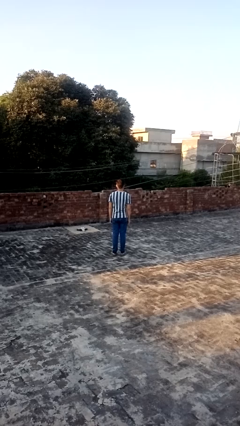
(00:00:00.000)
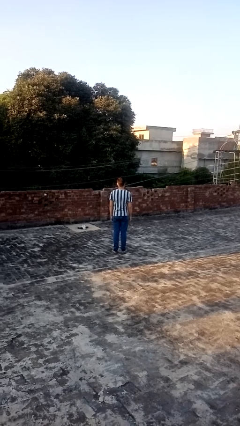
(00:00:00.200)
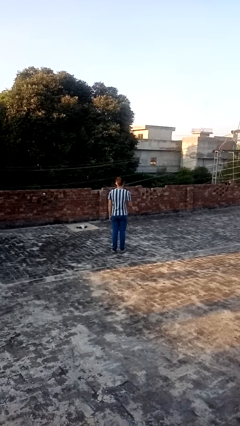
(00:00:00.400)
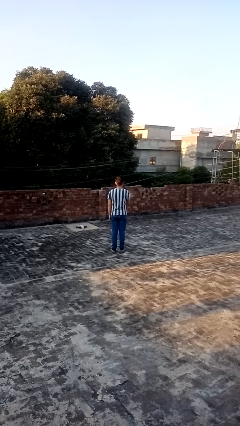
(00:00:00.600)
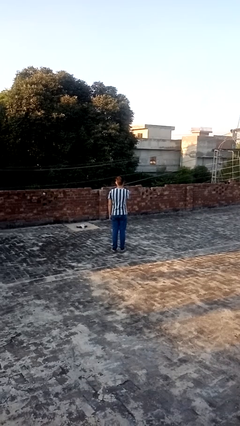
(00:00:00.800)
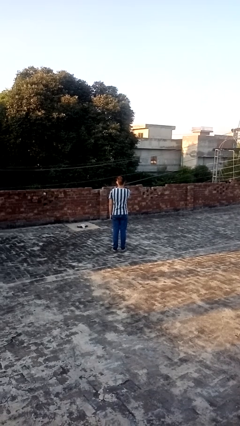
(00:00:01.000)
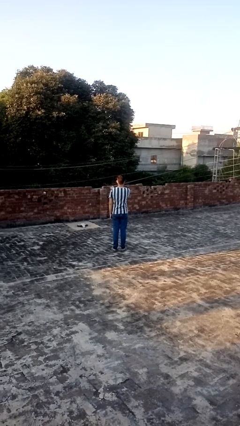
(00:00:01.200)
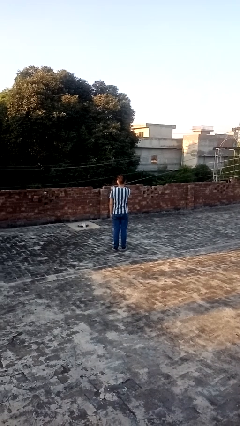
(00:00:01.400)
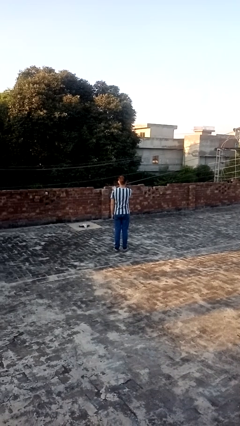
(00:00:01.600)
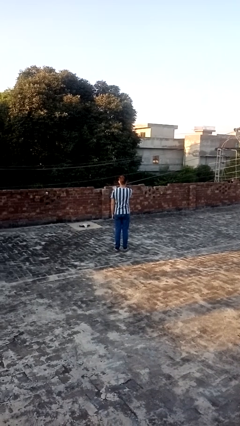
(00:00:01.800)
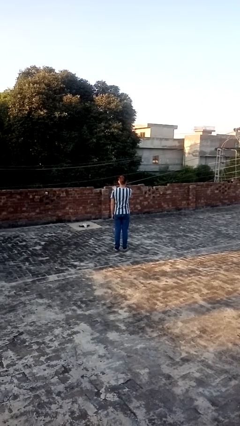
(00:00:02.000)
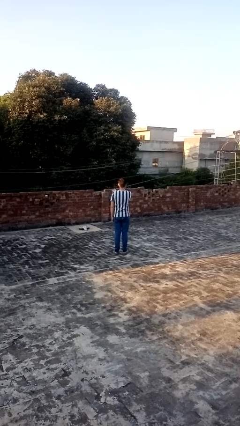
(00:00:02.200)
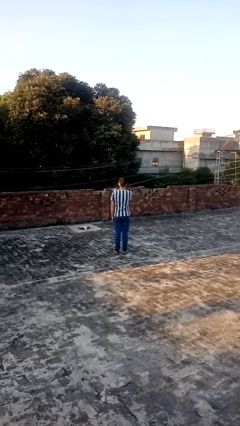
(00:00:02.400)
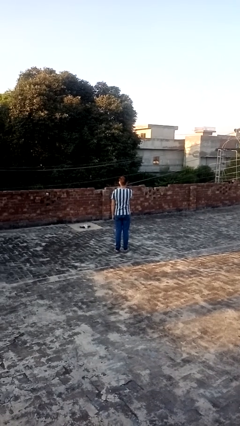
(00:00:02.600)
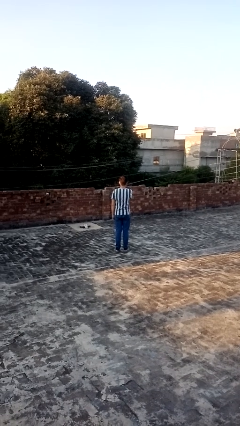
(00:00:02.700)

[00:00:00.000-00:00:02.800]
person gestures swipe left

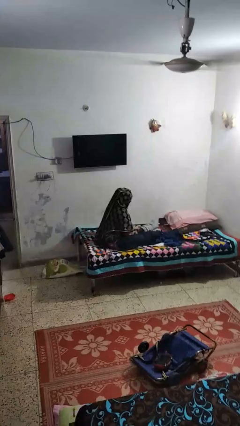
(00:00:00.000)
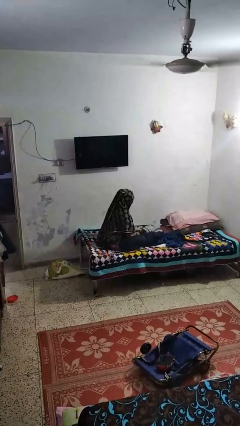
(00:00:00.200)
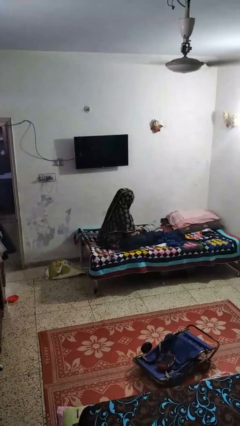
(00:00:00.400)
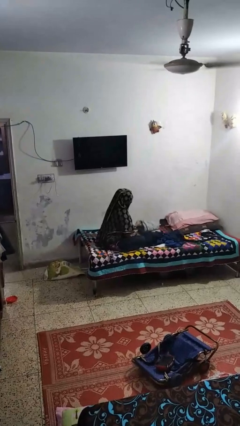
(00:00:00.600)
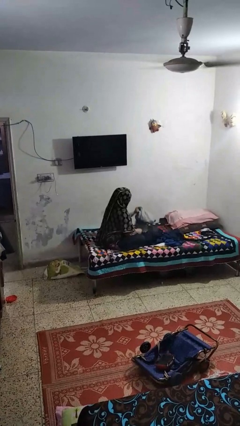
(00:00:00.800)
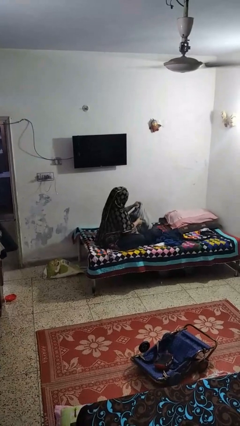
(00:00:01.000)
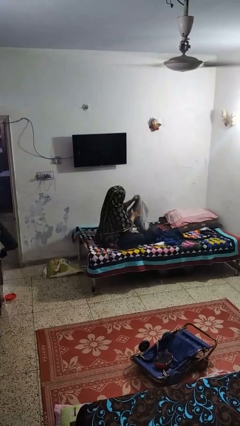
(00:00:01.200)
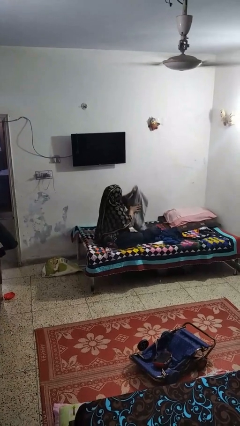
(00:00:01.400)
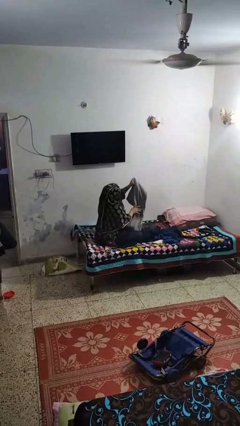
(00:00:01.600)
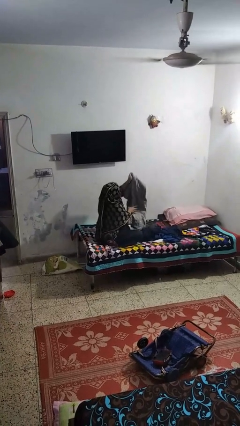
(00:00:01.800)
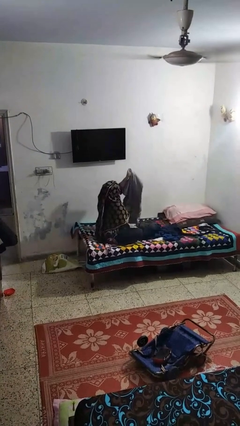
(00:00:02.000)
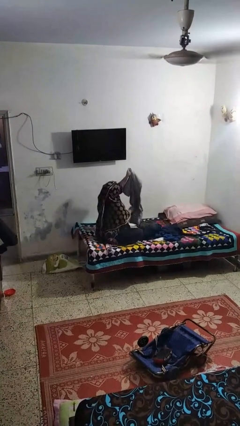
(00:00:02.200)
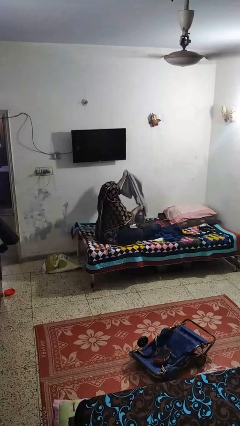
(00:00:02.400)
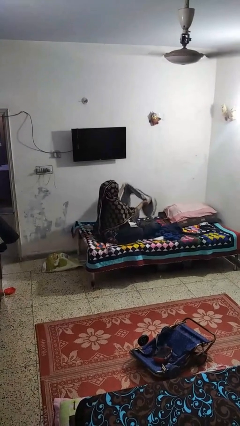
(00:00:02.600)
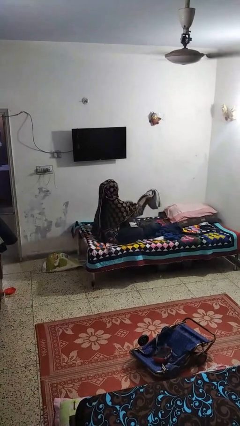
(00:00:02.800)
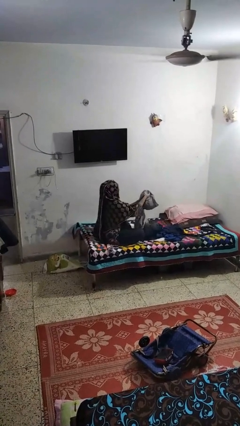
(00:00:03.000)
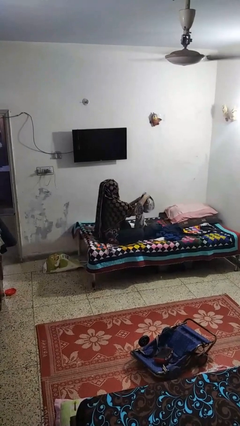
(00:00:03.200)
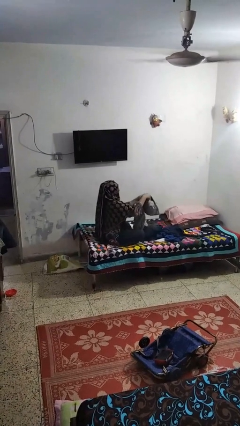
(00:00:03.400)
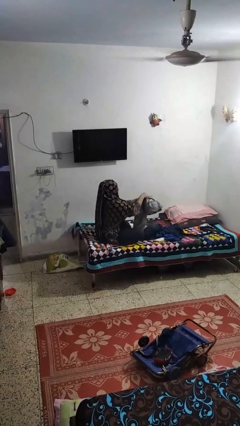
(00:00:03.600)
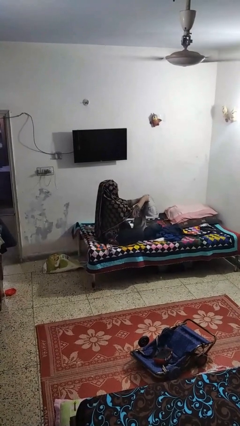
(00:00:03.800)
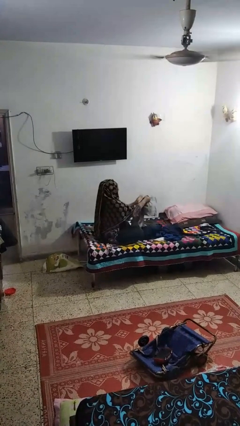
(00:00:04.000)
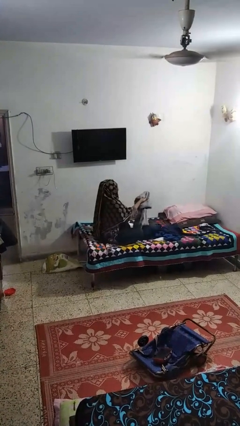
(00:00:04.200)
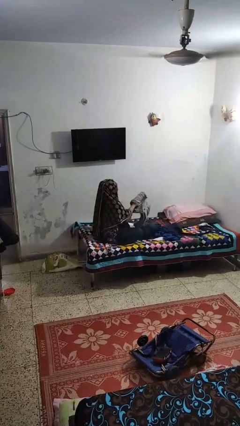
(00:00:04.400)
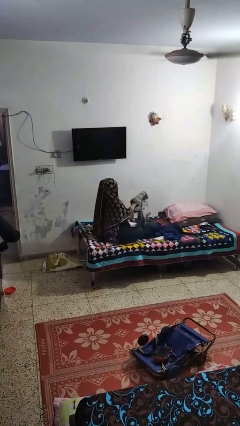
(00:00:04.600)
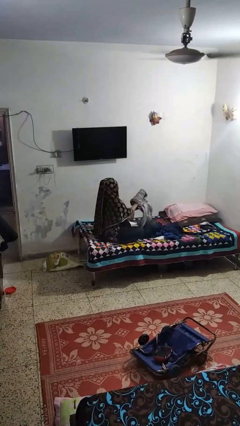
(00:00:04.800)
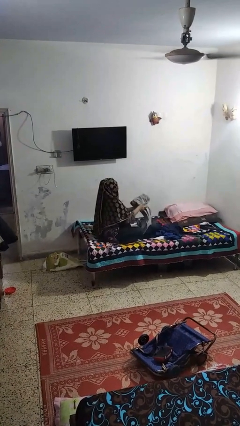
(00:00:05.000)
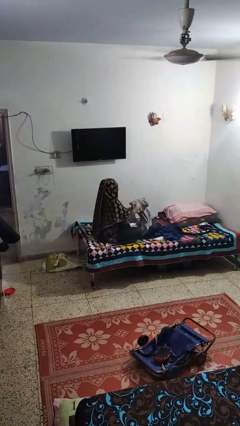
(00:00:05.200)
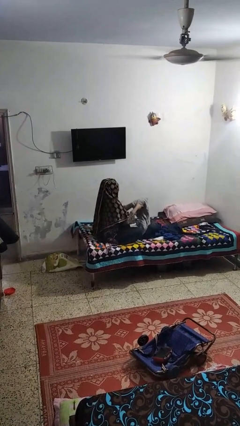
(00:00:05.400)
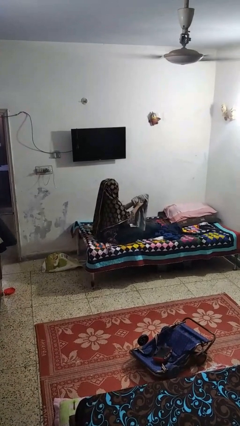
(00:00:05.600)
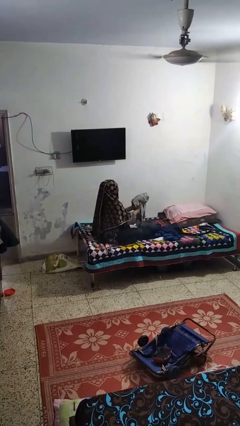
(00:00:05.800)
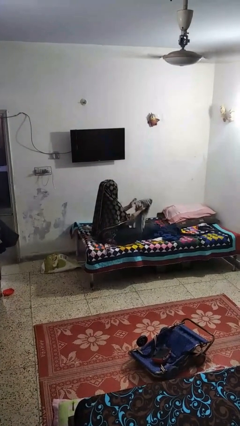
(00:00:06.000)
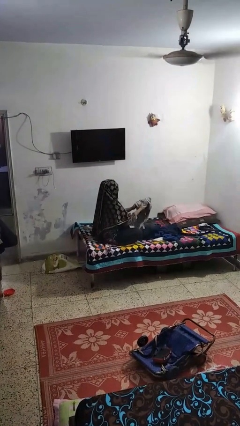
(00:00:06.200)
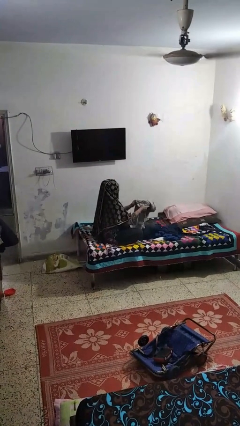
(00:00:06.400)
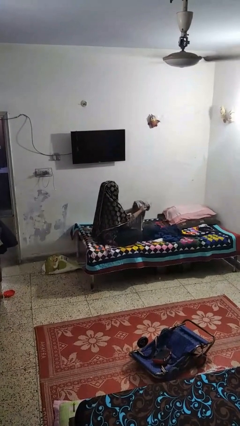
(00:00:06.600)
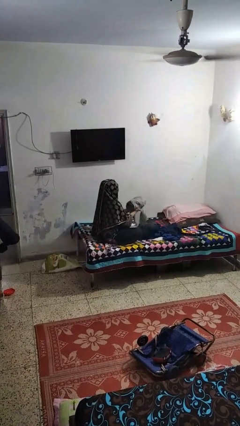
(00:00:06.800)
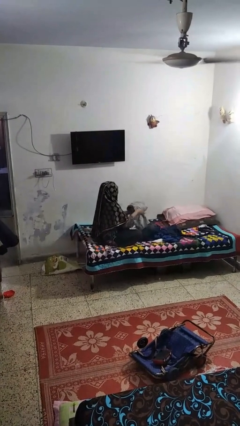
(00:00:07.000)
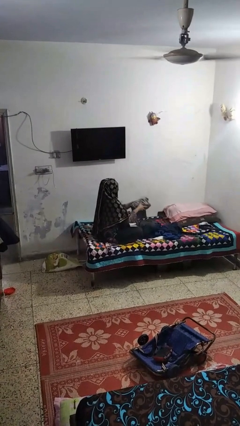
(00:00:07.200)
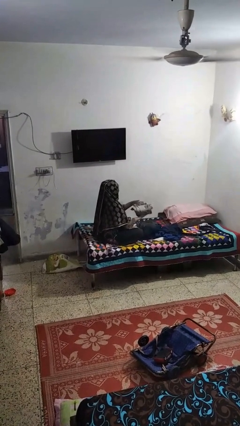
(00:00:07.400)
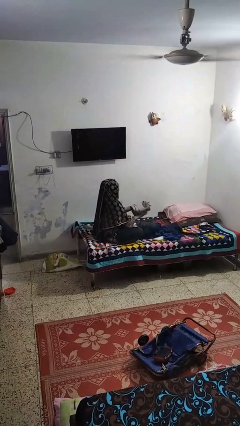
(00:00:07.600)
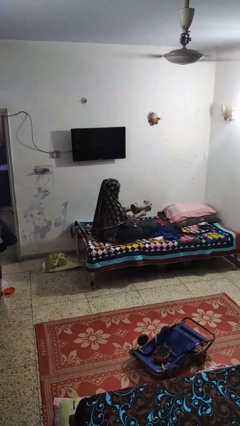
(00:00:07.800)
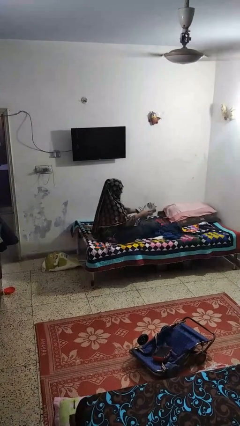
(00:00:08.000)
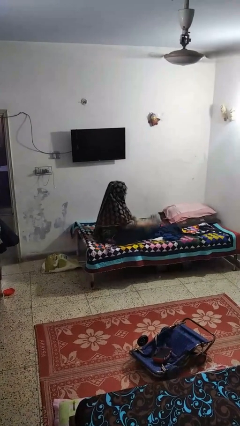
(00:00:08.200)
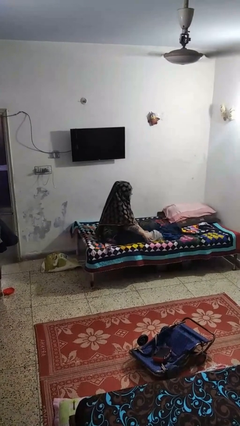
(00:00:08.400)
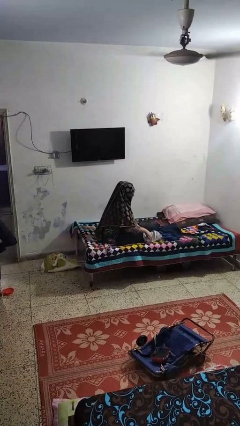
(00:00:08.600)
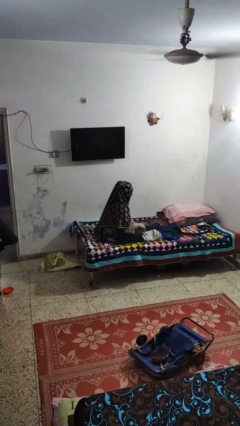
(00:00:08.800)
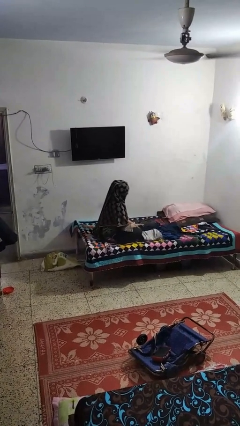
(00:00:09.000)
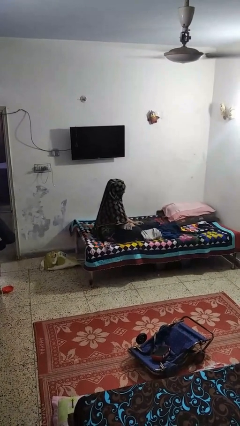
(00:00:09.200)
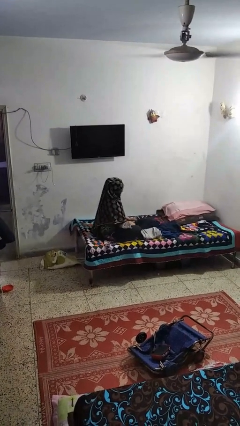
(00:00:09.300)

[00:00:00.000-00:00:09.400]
person folds pants

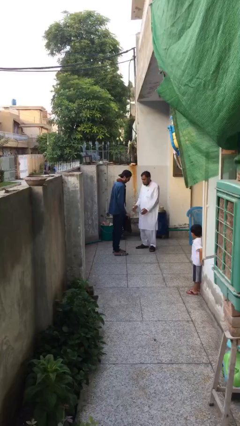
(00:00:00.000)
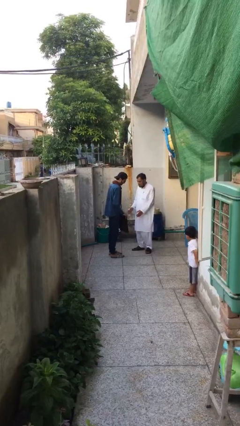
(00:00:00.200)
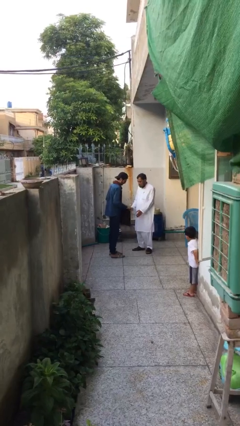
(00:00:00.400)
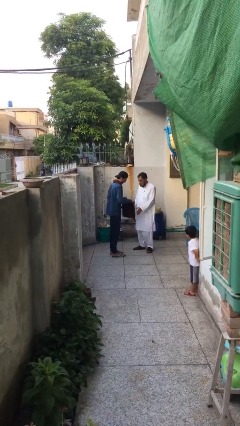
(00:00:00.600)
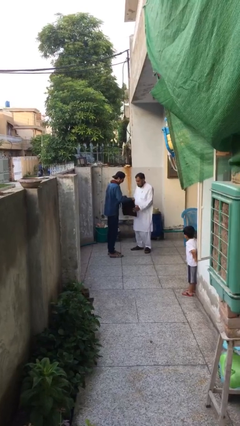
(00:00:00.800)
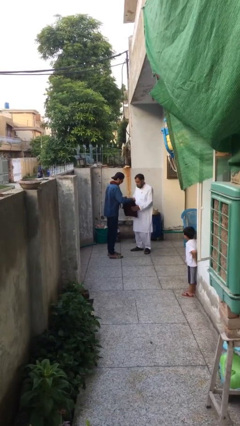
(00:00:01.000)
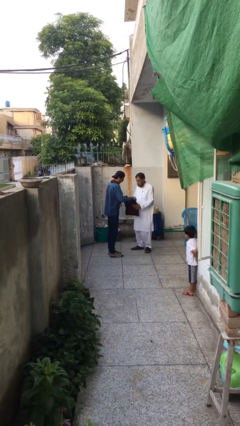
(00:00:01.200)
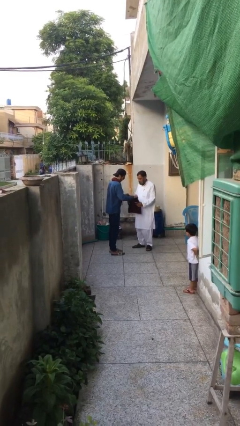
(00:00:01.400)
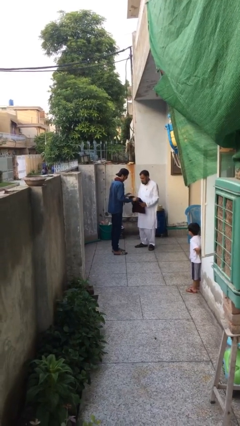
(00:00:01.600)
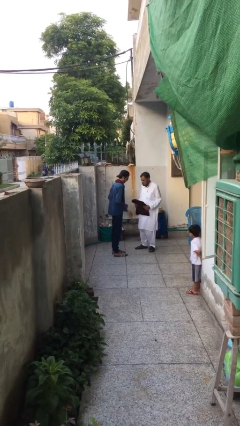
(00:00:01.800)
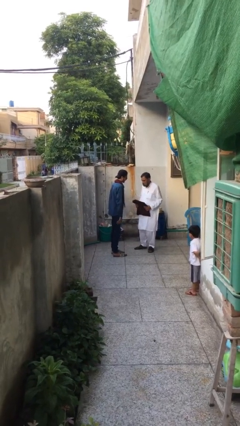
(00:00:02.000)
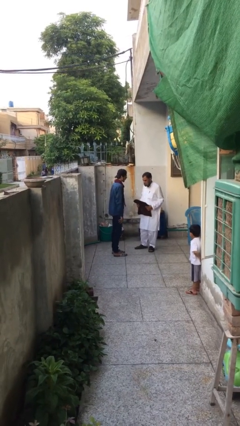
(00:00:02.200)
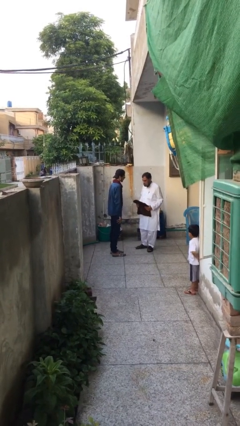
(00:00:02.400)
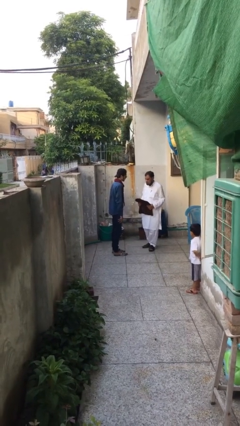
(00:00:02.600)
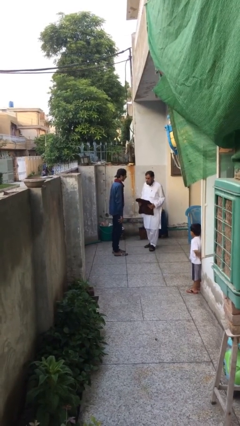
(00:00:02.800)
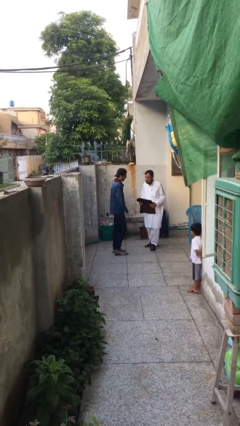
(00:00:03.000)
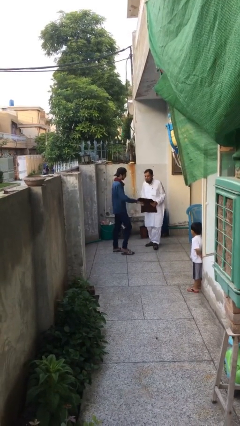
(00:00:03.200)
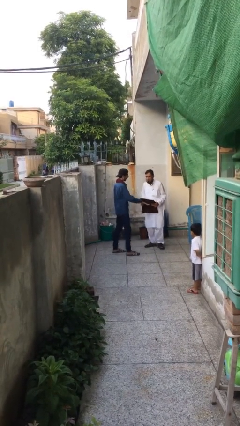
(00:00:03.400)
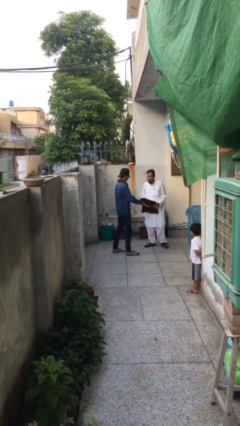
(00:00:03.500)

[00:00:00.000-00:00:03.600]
person transfers object to person

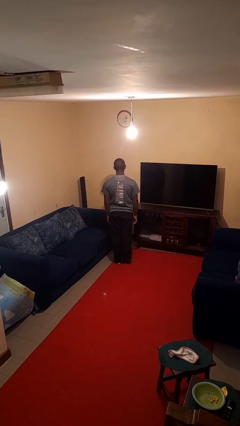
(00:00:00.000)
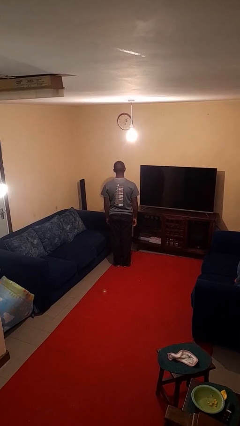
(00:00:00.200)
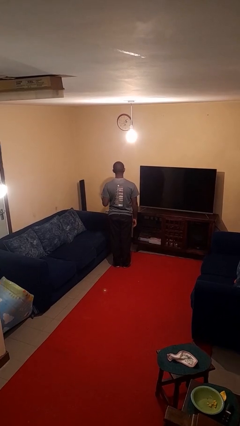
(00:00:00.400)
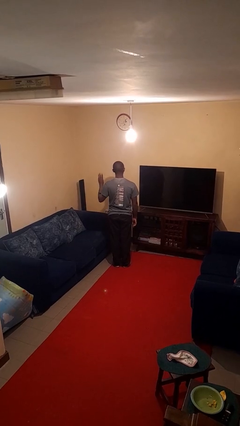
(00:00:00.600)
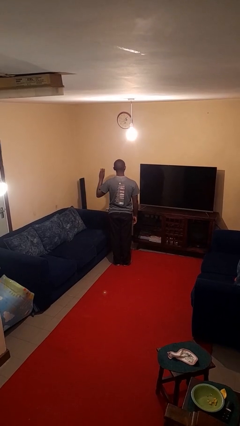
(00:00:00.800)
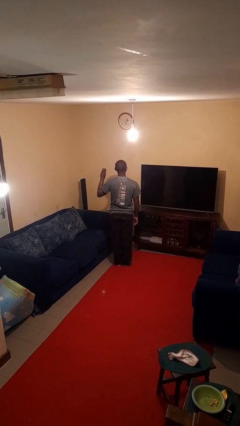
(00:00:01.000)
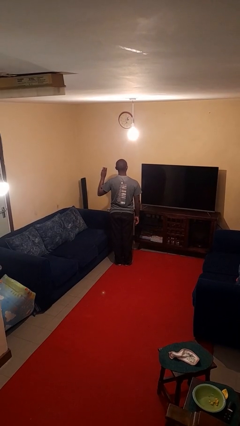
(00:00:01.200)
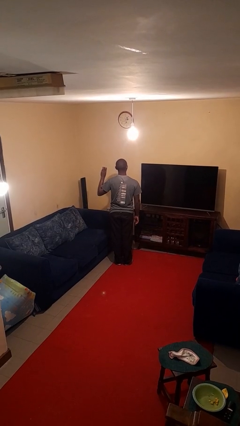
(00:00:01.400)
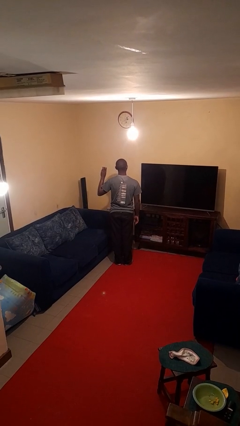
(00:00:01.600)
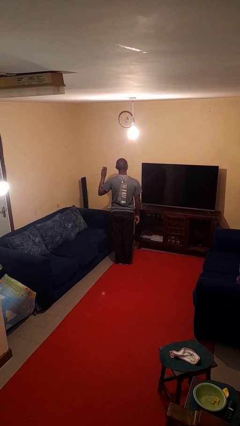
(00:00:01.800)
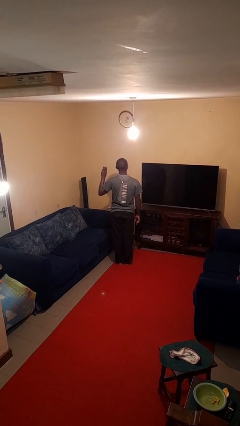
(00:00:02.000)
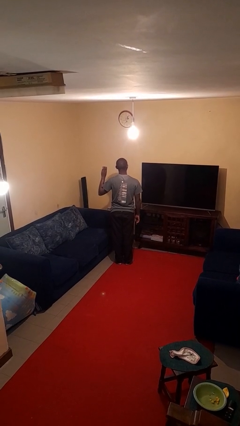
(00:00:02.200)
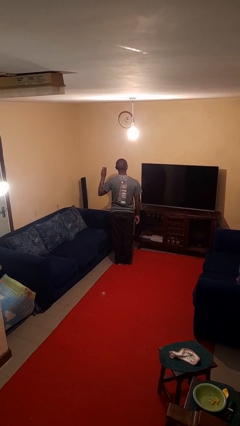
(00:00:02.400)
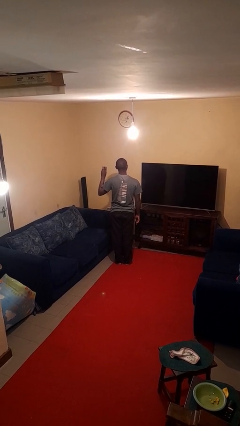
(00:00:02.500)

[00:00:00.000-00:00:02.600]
person gestures number three
